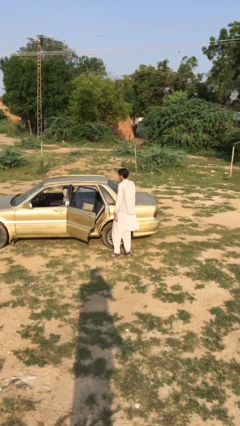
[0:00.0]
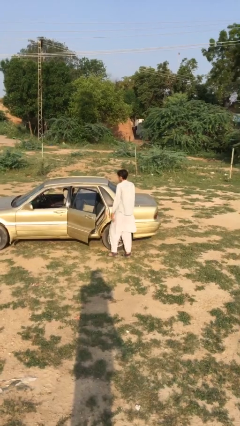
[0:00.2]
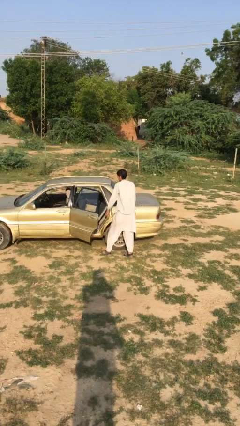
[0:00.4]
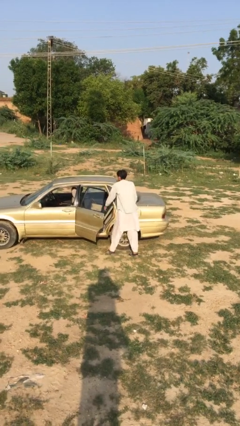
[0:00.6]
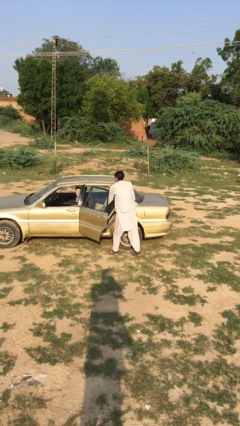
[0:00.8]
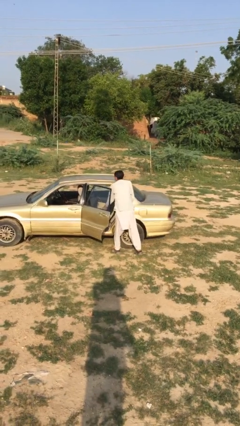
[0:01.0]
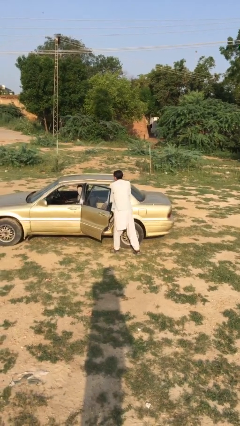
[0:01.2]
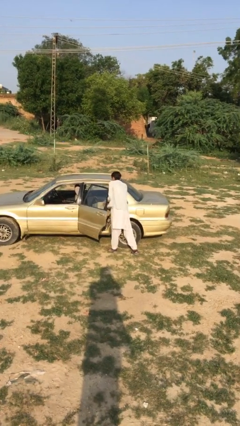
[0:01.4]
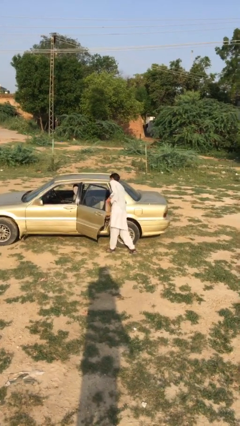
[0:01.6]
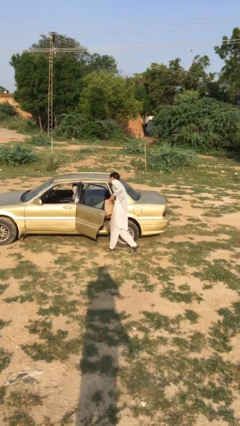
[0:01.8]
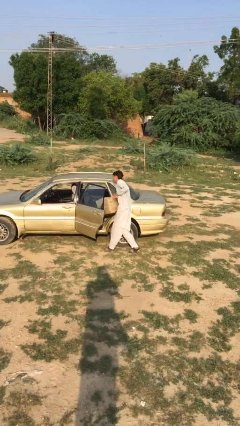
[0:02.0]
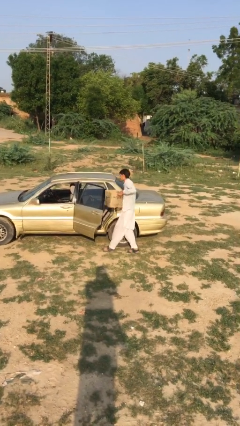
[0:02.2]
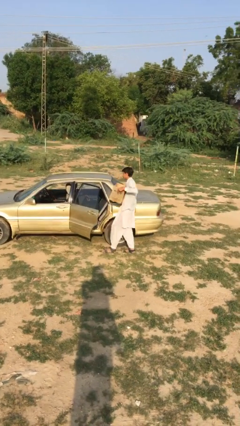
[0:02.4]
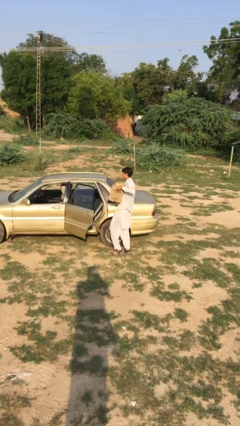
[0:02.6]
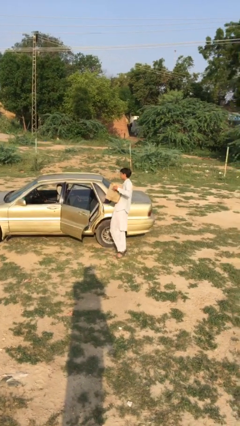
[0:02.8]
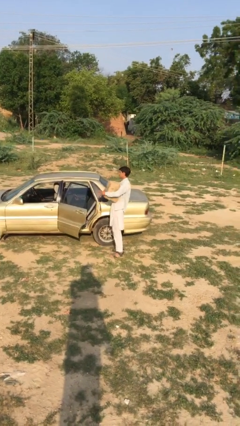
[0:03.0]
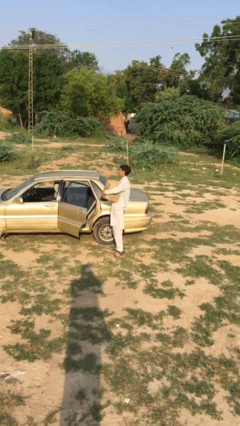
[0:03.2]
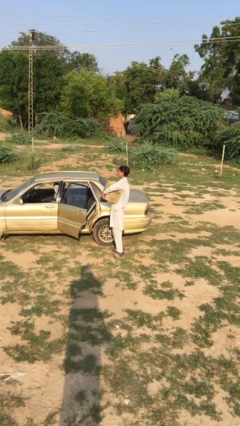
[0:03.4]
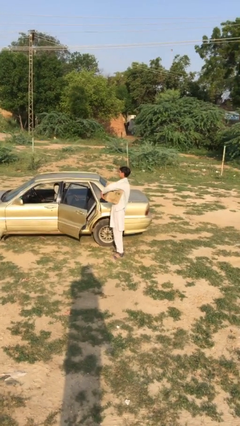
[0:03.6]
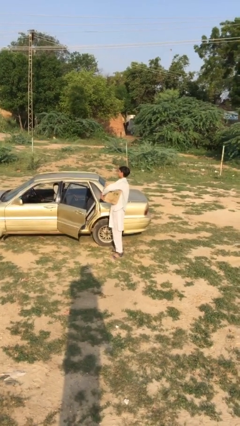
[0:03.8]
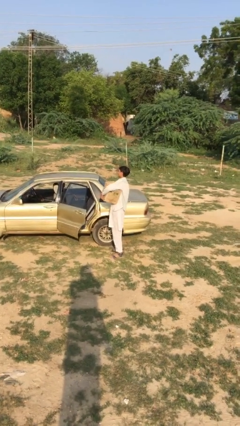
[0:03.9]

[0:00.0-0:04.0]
person unloads car

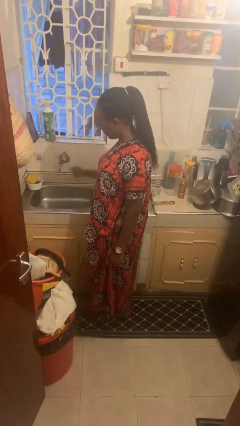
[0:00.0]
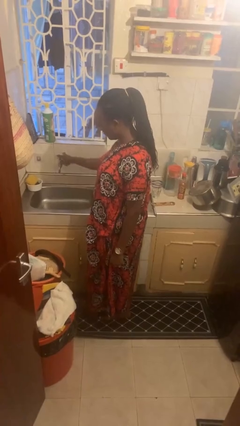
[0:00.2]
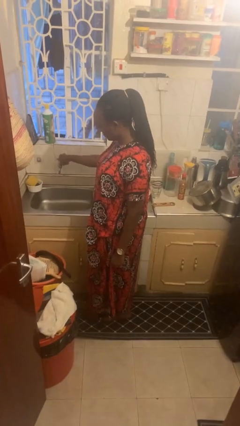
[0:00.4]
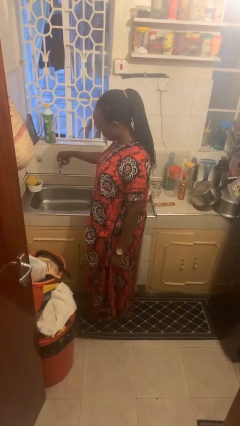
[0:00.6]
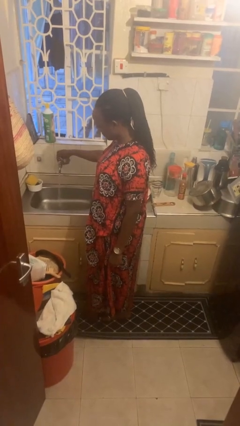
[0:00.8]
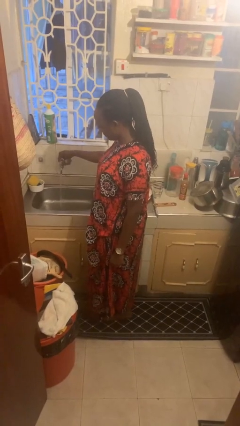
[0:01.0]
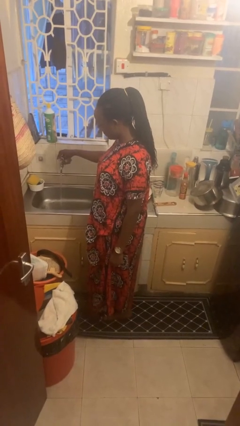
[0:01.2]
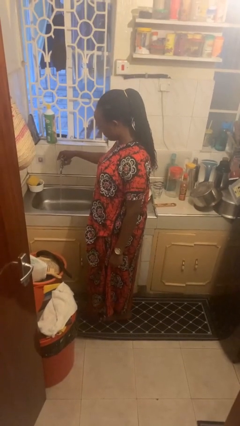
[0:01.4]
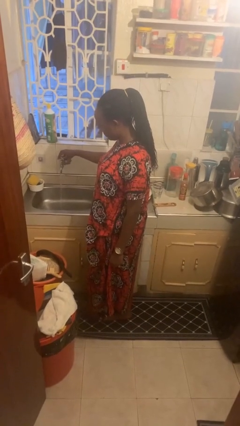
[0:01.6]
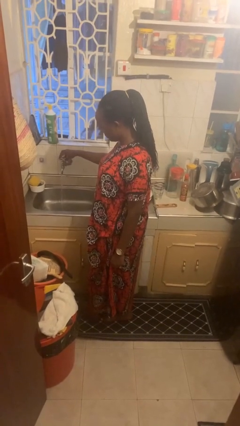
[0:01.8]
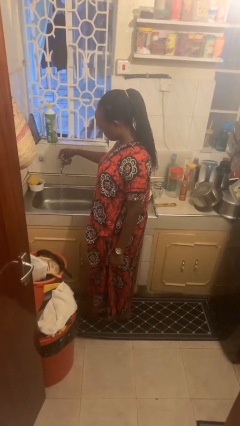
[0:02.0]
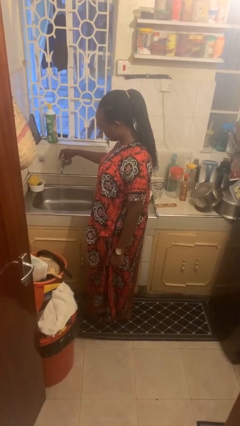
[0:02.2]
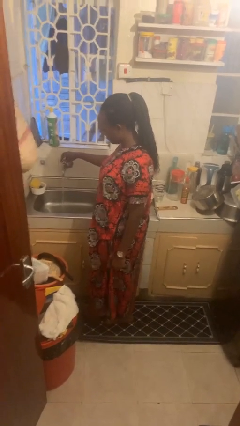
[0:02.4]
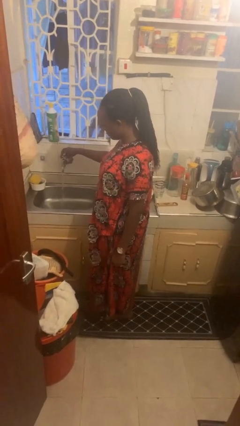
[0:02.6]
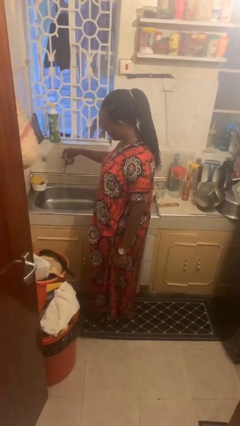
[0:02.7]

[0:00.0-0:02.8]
person turns on faucet

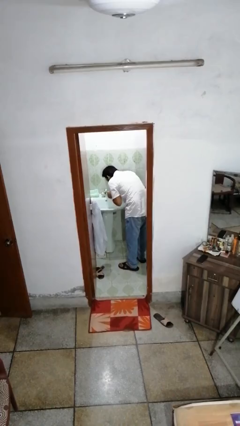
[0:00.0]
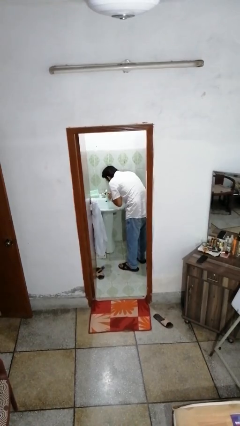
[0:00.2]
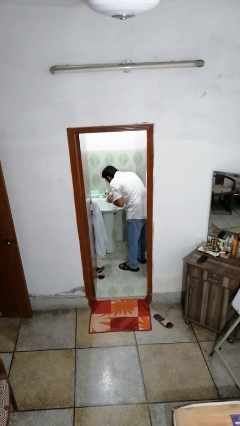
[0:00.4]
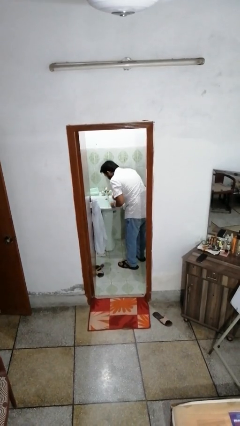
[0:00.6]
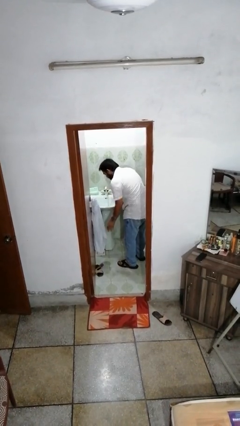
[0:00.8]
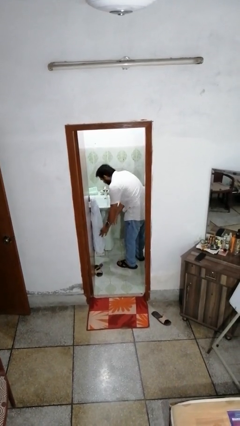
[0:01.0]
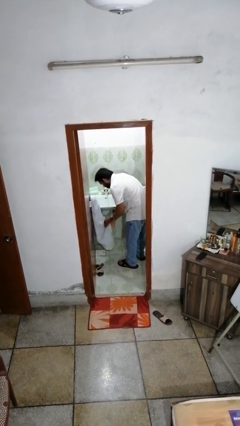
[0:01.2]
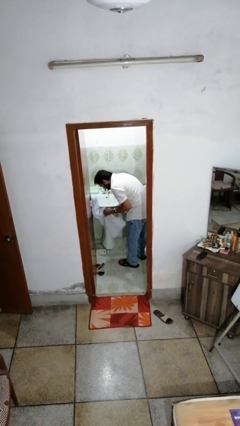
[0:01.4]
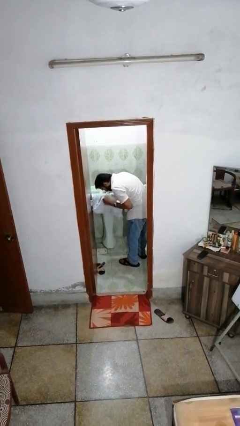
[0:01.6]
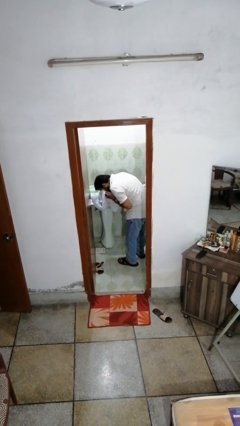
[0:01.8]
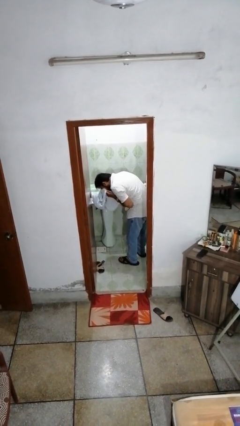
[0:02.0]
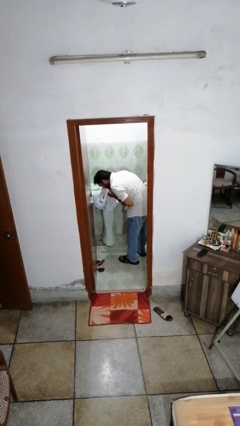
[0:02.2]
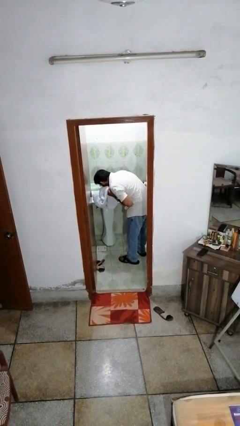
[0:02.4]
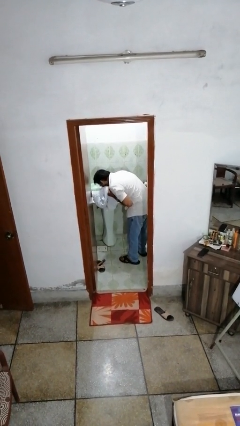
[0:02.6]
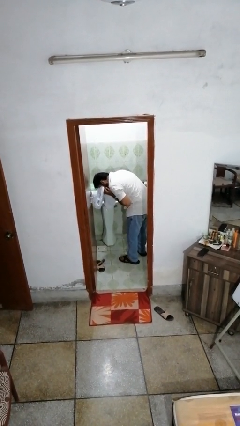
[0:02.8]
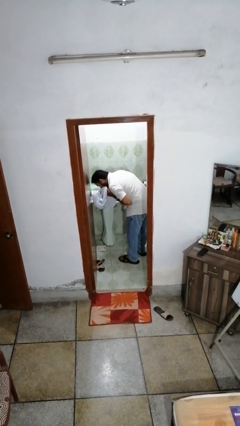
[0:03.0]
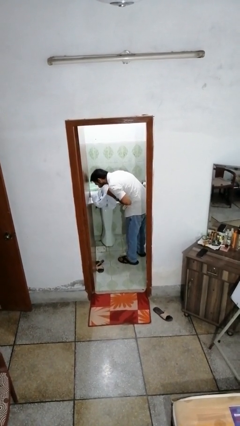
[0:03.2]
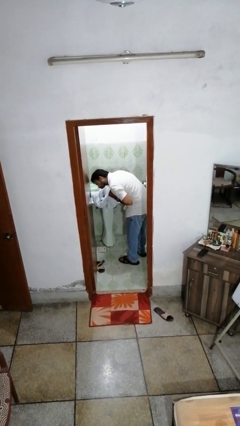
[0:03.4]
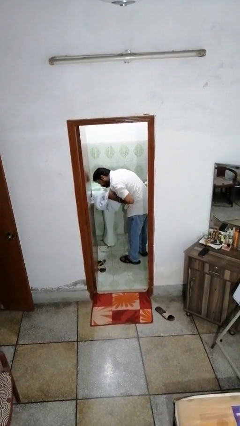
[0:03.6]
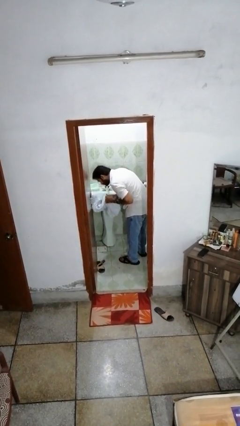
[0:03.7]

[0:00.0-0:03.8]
person dries face with towel

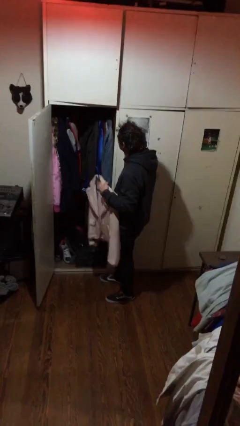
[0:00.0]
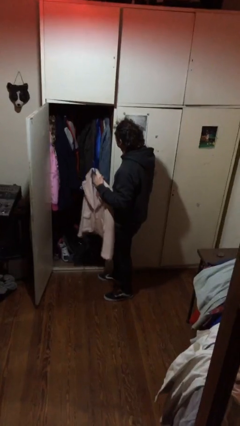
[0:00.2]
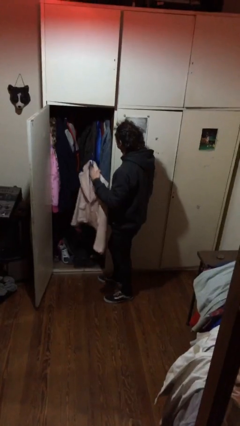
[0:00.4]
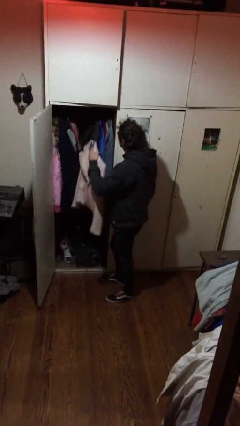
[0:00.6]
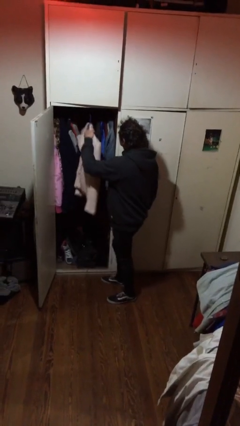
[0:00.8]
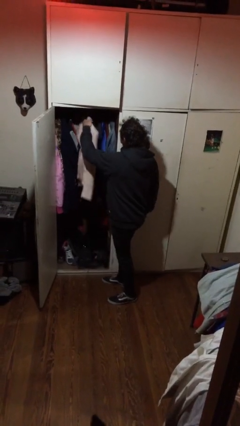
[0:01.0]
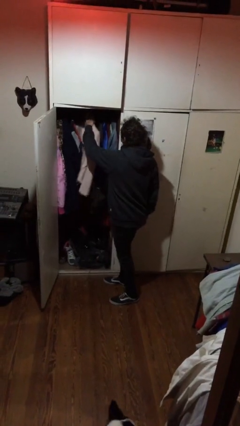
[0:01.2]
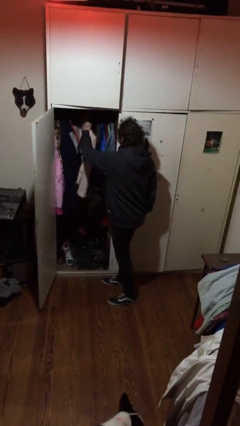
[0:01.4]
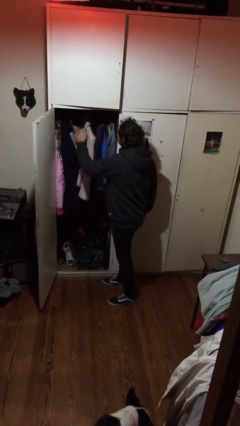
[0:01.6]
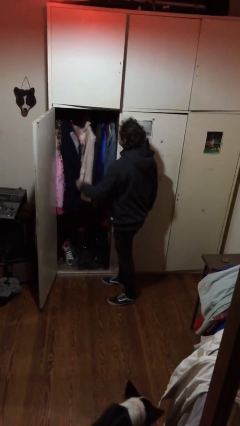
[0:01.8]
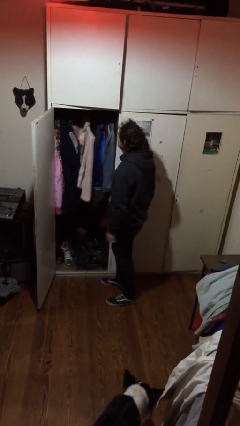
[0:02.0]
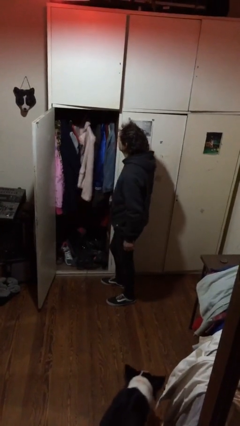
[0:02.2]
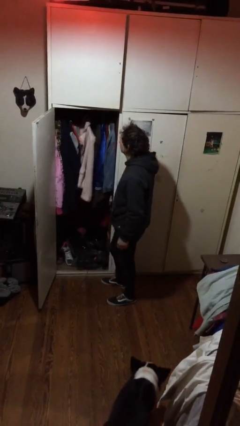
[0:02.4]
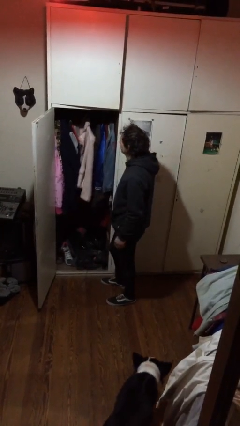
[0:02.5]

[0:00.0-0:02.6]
person puts clothes into closet

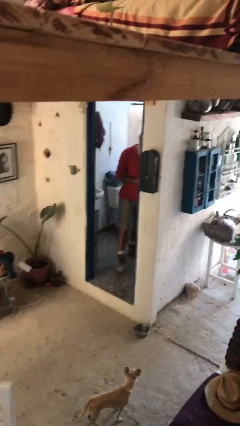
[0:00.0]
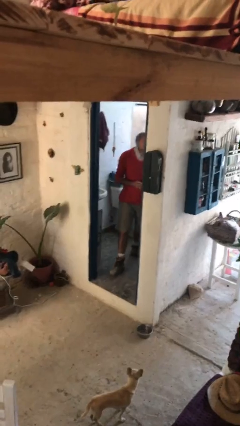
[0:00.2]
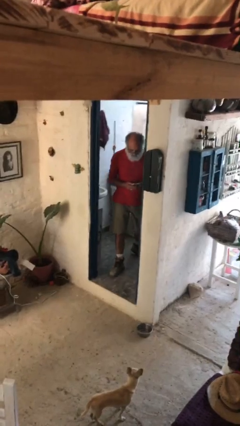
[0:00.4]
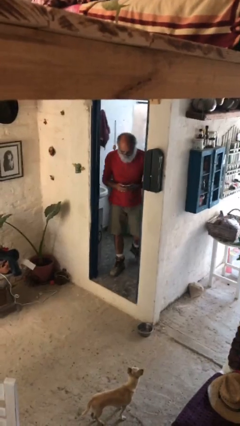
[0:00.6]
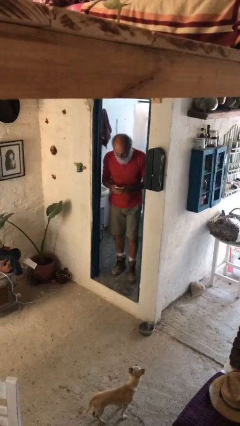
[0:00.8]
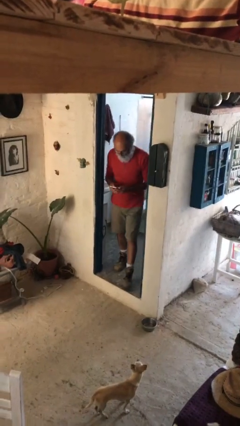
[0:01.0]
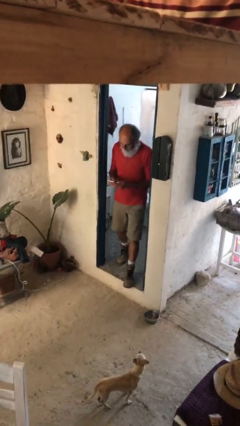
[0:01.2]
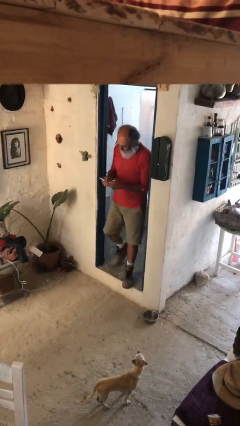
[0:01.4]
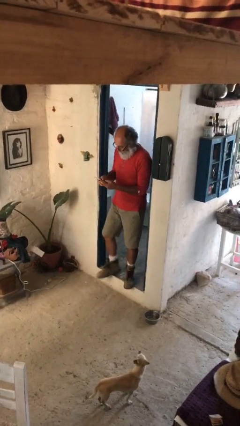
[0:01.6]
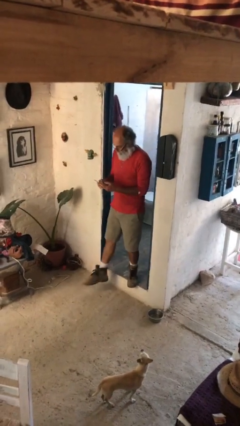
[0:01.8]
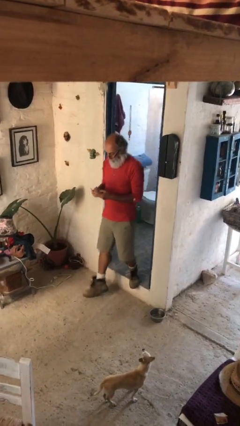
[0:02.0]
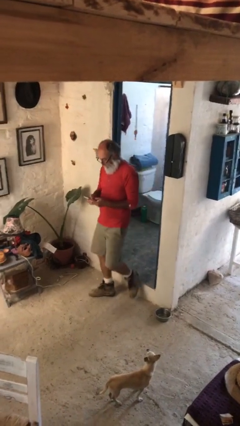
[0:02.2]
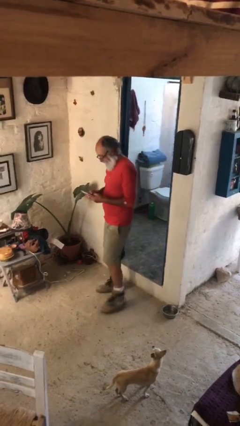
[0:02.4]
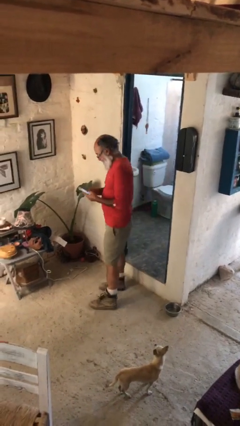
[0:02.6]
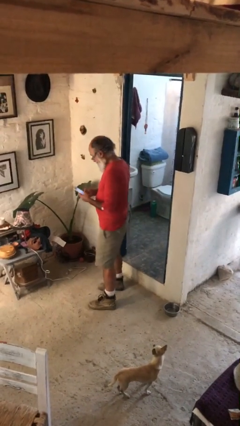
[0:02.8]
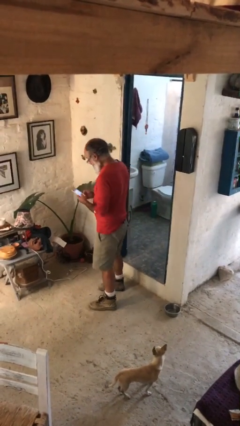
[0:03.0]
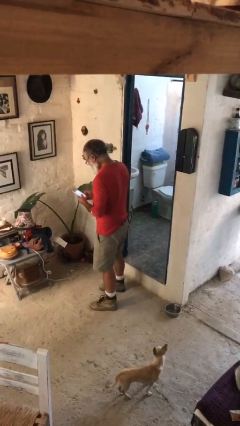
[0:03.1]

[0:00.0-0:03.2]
person enters scene through structure

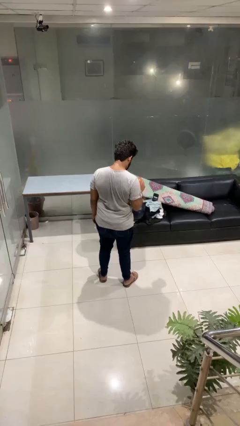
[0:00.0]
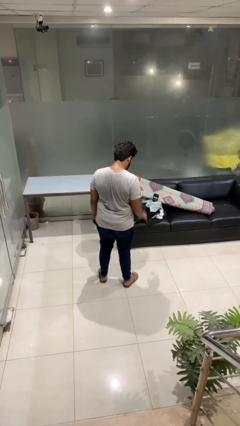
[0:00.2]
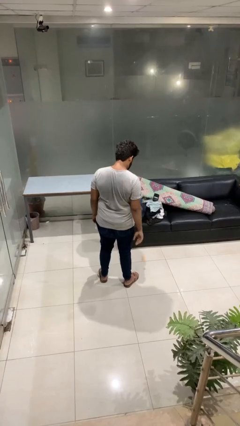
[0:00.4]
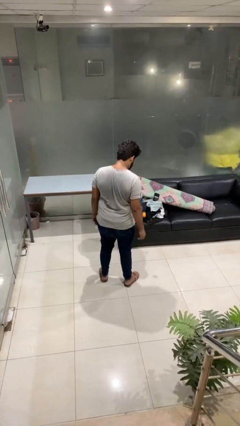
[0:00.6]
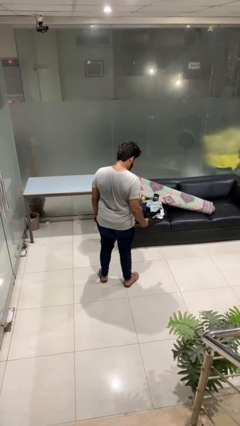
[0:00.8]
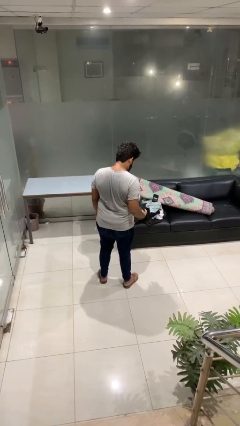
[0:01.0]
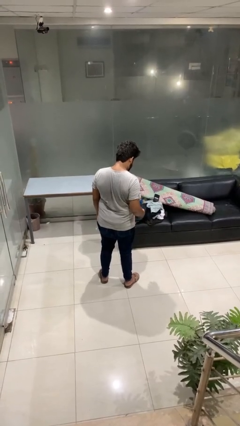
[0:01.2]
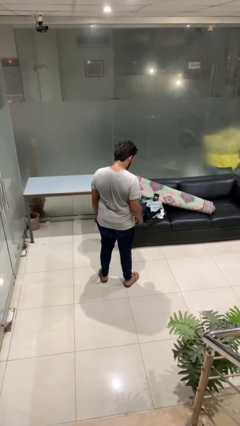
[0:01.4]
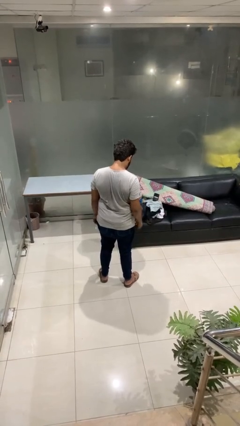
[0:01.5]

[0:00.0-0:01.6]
person bounces ball on floor
